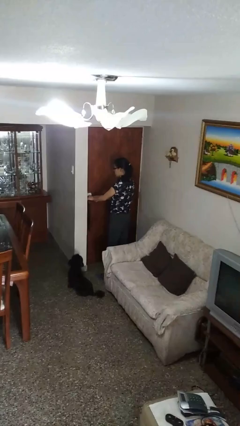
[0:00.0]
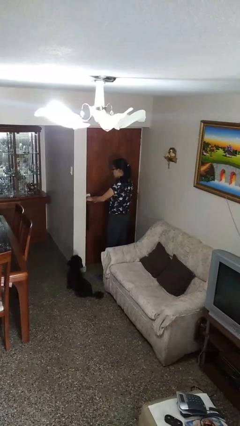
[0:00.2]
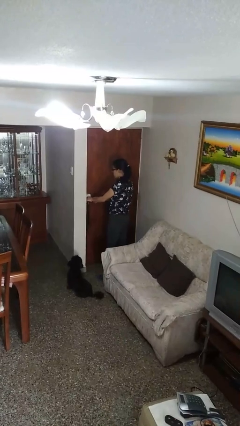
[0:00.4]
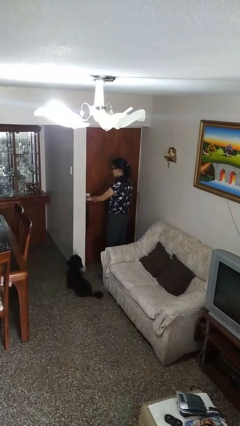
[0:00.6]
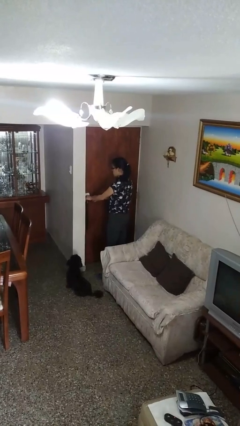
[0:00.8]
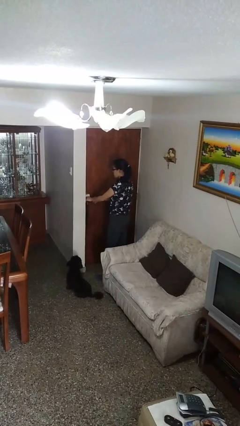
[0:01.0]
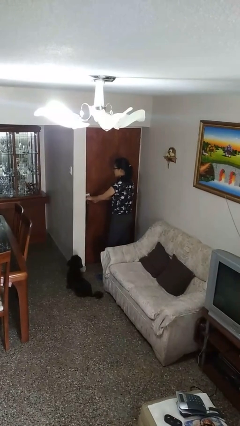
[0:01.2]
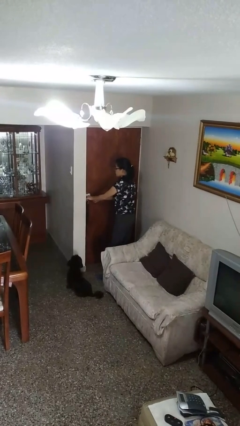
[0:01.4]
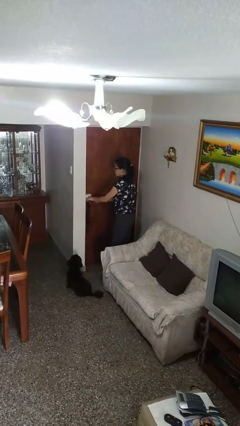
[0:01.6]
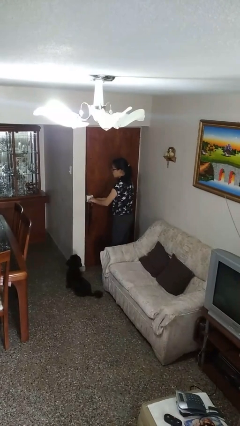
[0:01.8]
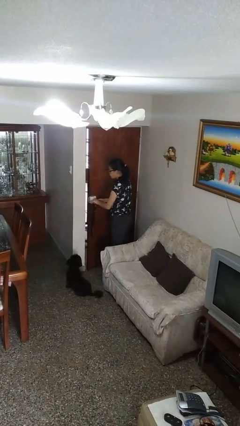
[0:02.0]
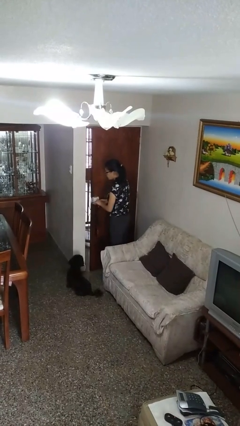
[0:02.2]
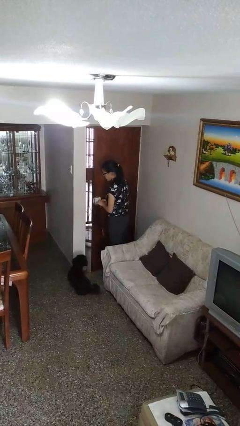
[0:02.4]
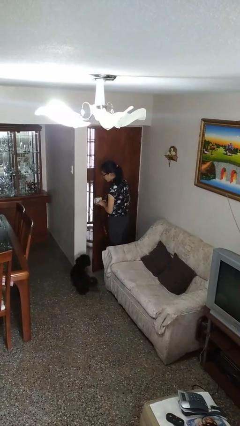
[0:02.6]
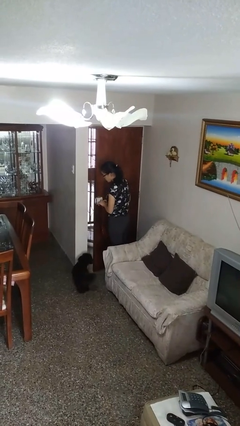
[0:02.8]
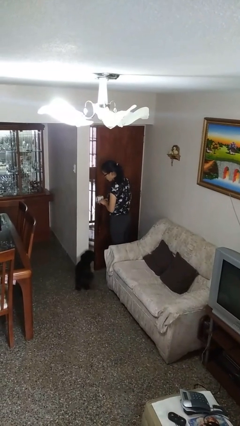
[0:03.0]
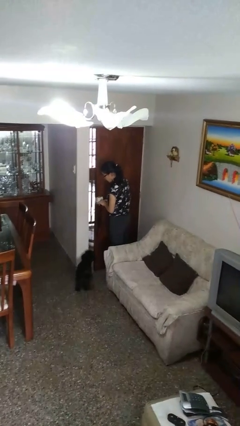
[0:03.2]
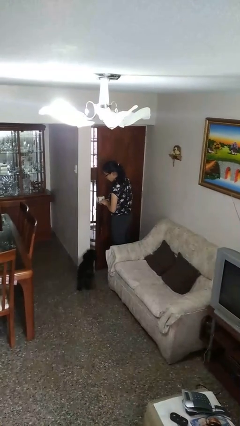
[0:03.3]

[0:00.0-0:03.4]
person opens facility door

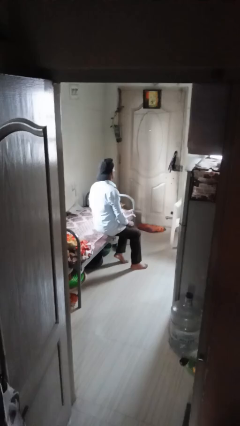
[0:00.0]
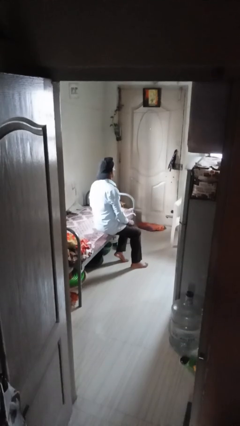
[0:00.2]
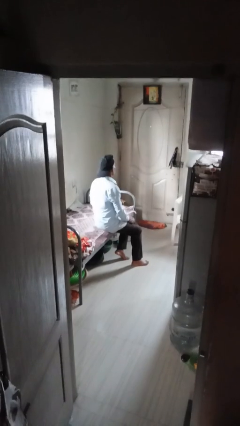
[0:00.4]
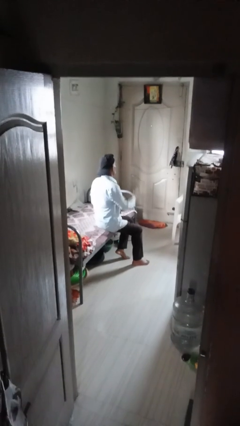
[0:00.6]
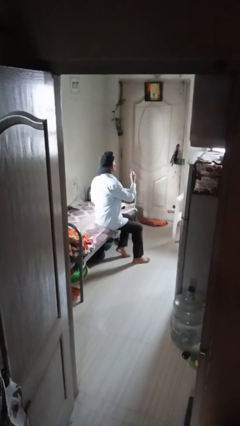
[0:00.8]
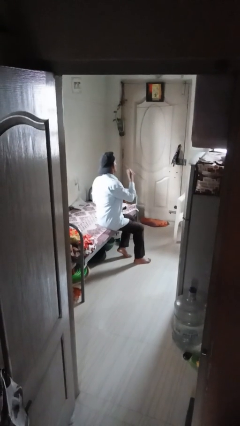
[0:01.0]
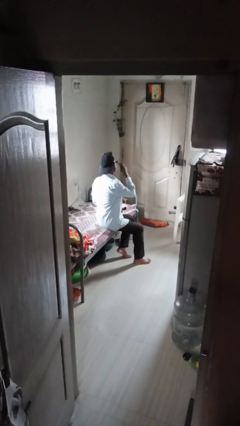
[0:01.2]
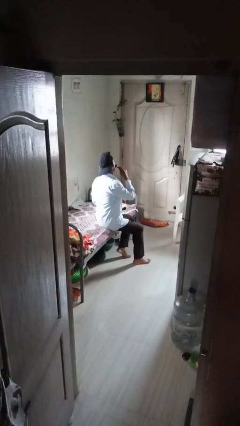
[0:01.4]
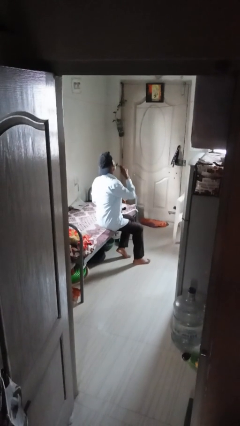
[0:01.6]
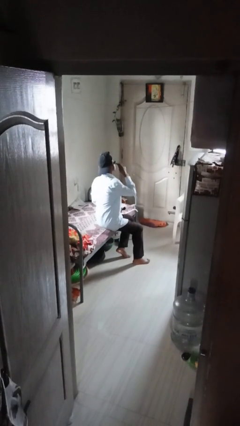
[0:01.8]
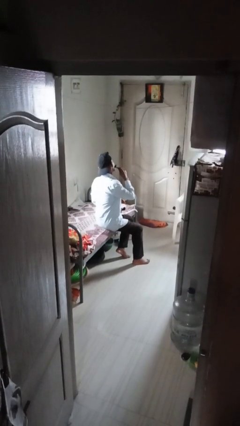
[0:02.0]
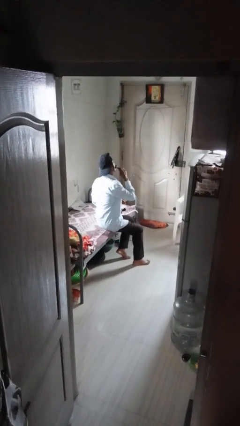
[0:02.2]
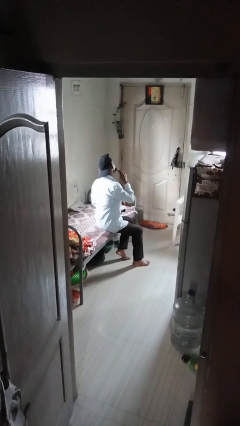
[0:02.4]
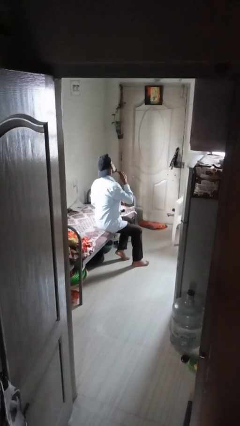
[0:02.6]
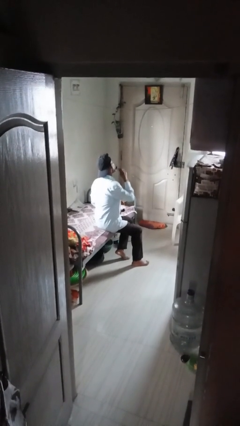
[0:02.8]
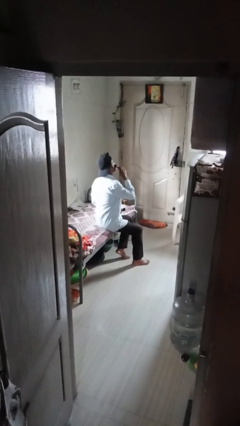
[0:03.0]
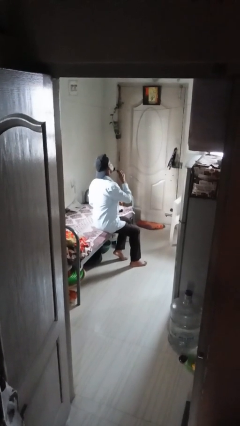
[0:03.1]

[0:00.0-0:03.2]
person shaves face

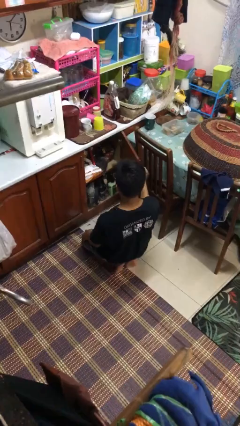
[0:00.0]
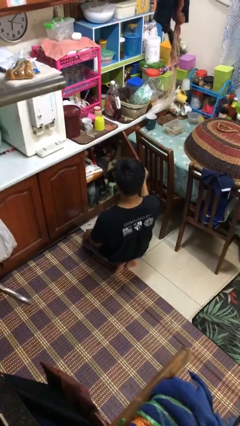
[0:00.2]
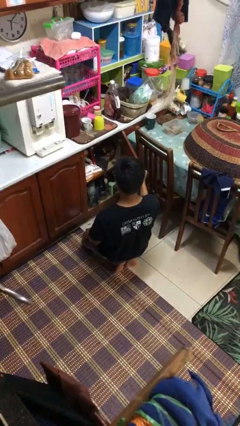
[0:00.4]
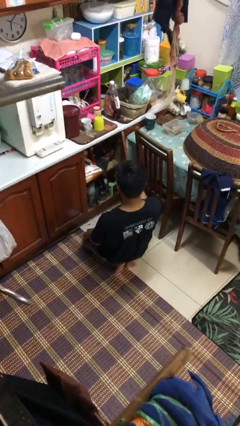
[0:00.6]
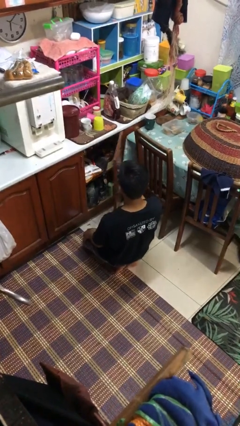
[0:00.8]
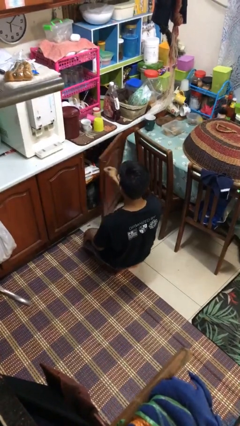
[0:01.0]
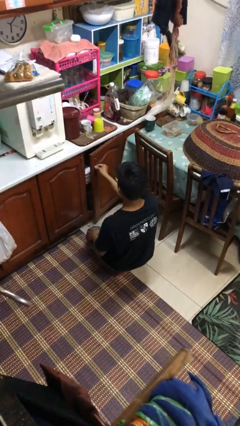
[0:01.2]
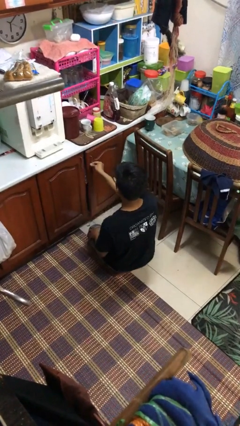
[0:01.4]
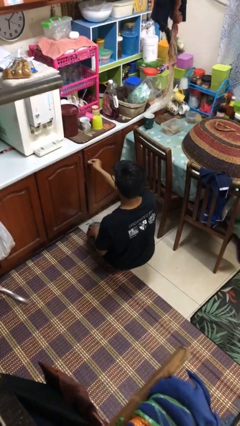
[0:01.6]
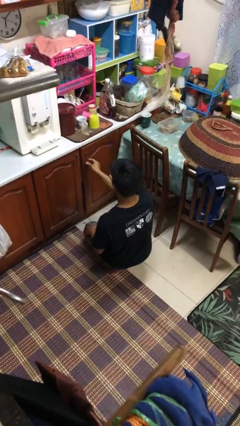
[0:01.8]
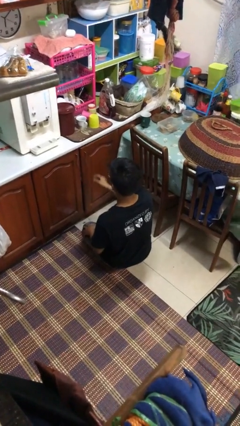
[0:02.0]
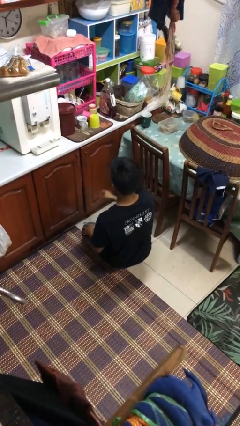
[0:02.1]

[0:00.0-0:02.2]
person closes kitchen drawer

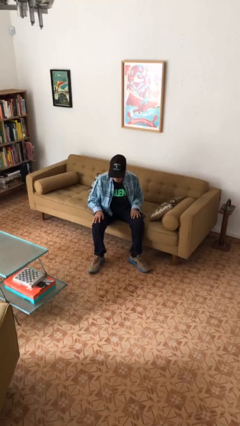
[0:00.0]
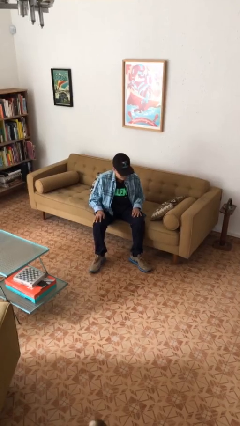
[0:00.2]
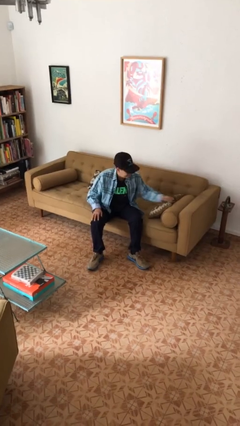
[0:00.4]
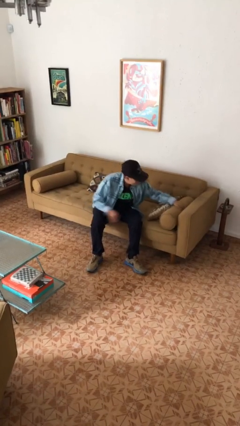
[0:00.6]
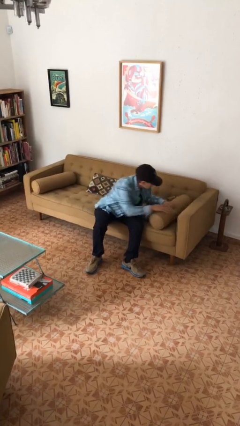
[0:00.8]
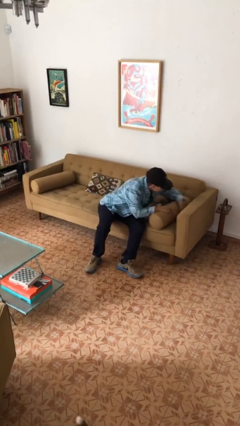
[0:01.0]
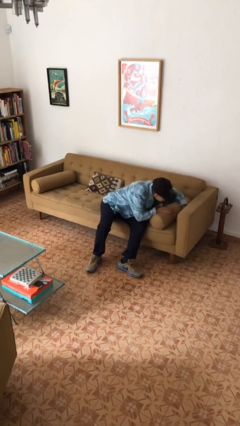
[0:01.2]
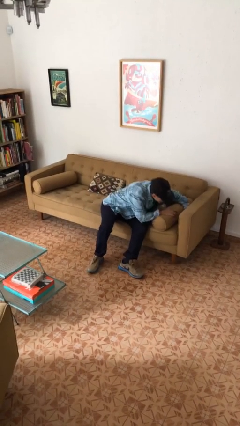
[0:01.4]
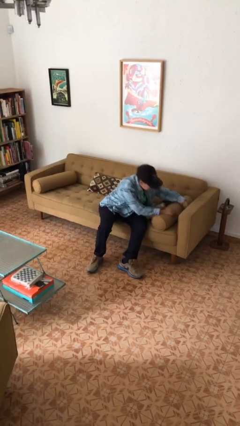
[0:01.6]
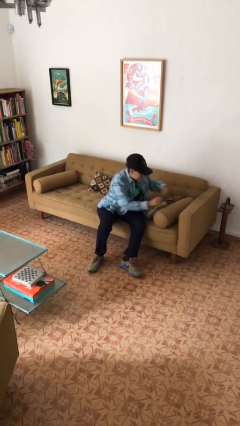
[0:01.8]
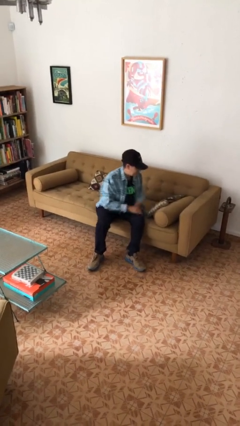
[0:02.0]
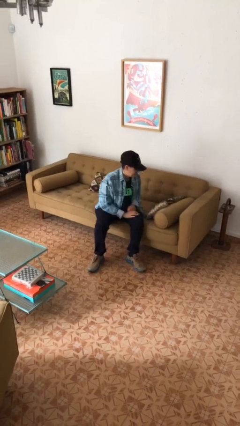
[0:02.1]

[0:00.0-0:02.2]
person searches in couch

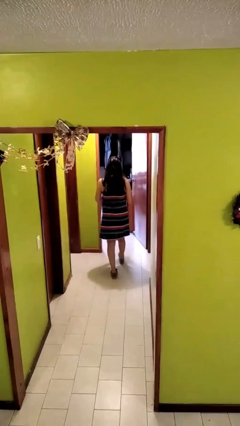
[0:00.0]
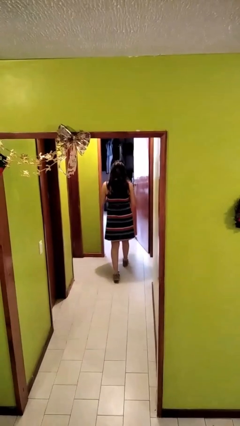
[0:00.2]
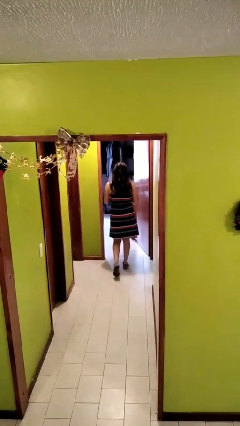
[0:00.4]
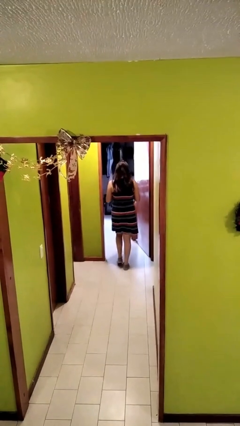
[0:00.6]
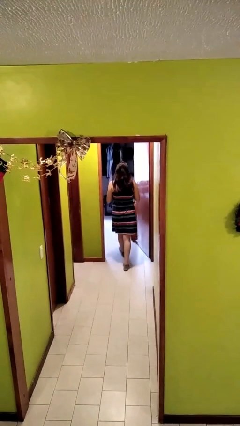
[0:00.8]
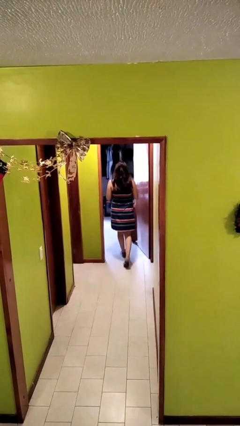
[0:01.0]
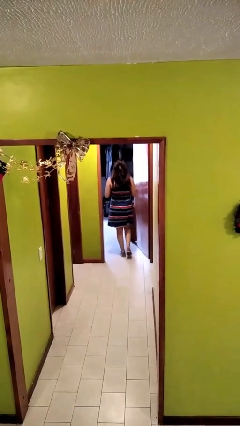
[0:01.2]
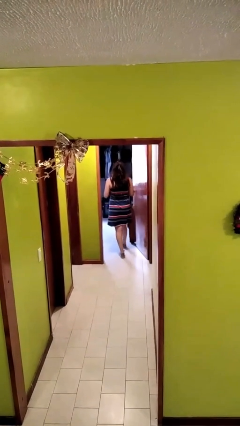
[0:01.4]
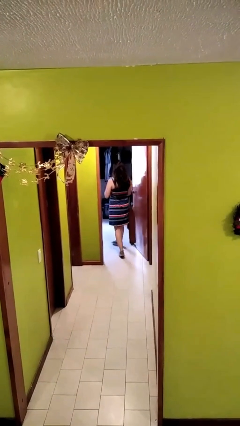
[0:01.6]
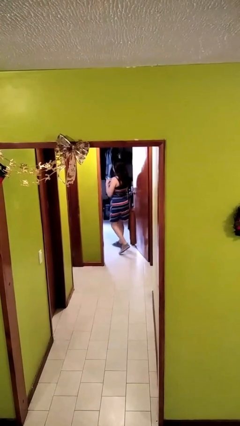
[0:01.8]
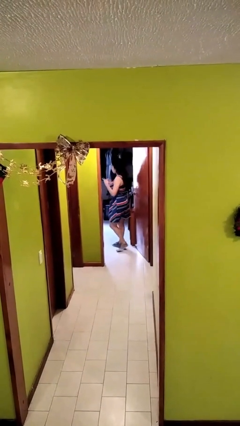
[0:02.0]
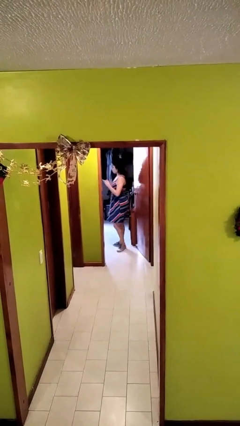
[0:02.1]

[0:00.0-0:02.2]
person enters scene through structure

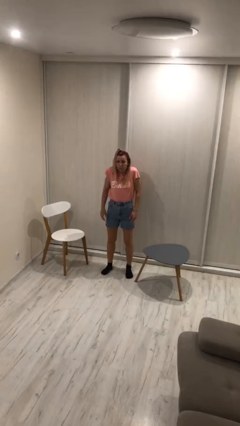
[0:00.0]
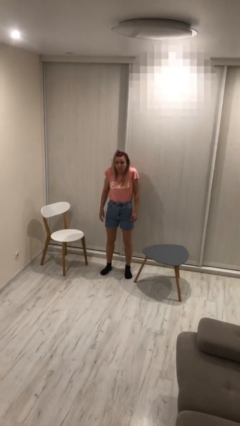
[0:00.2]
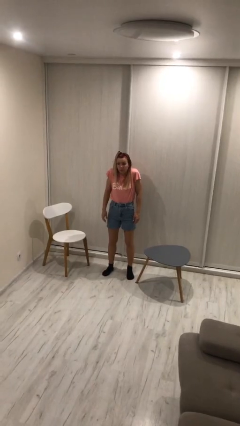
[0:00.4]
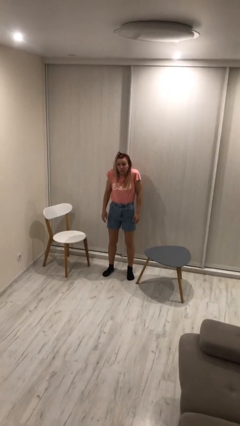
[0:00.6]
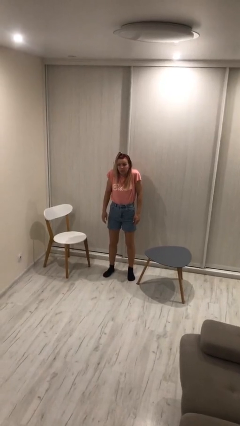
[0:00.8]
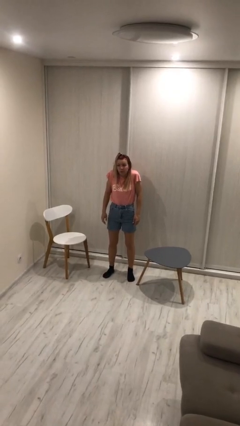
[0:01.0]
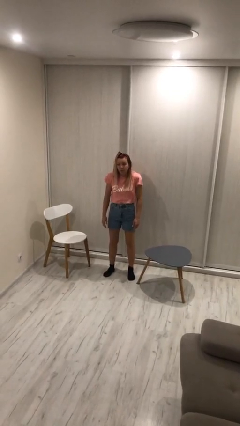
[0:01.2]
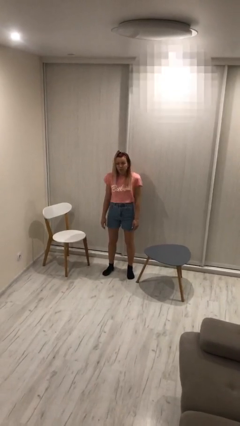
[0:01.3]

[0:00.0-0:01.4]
person shrugs

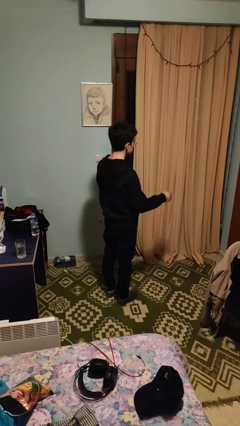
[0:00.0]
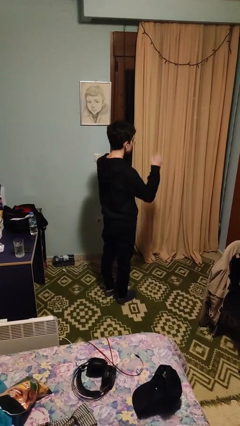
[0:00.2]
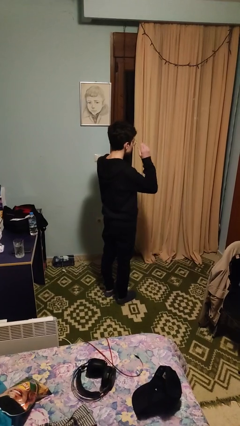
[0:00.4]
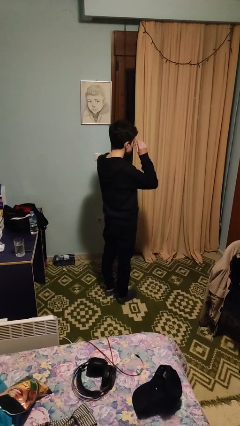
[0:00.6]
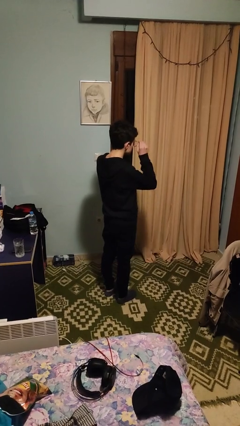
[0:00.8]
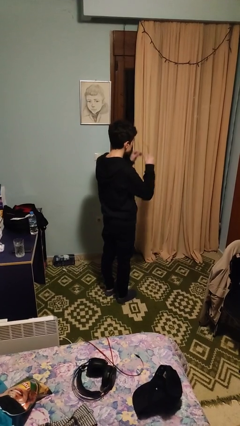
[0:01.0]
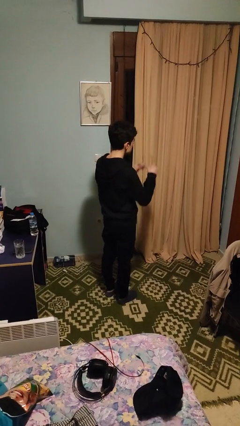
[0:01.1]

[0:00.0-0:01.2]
person takes off glasses

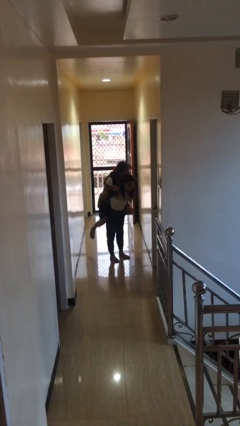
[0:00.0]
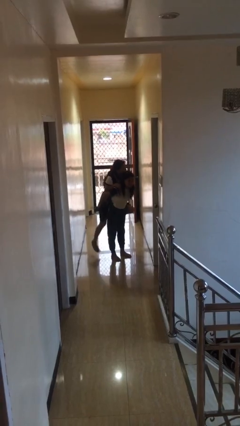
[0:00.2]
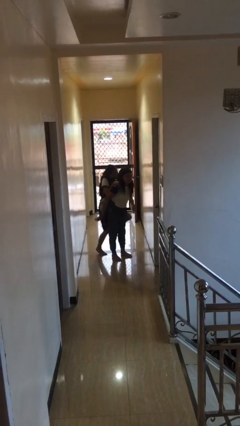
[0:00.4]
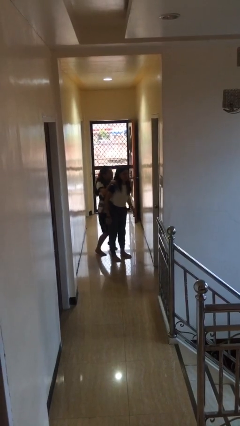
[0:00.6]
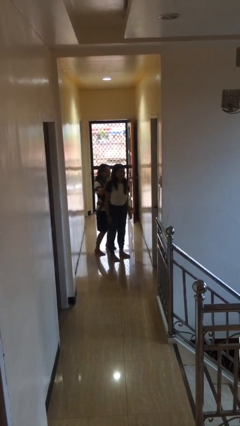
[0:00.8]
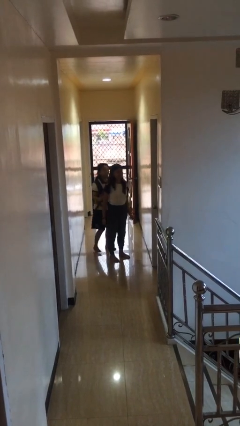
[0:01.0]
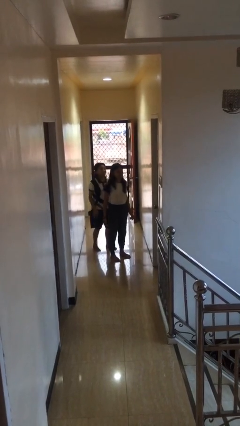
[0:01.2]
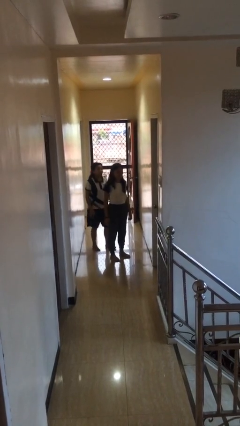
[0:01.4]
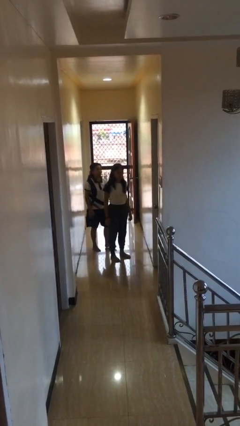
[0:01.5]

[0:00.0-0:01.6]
person puts down person
